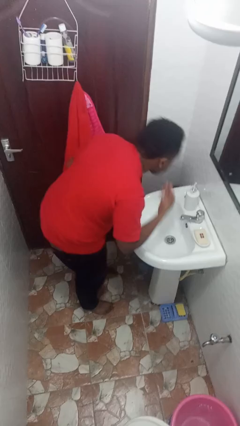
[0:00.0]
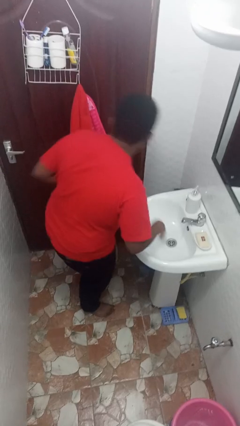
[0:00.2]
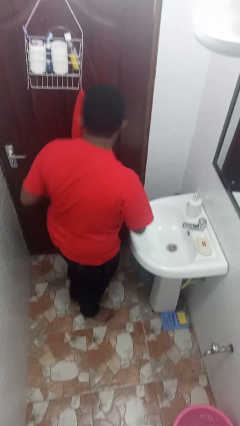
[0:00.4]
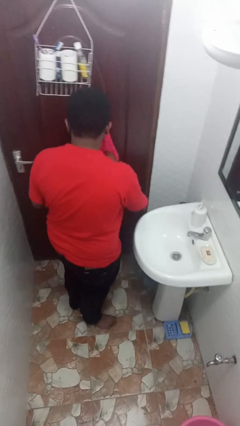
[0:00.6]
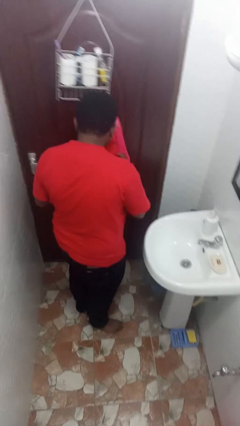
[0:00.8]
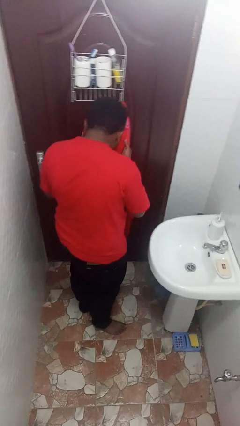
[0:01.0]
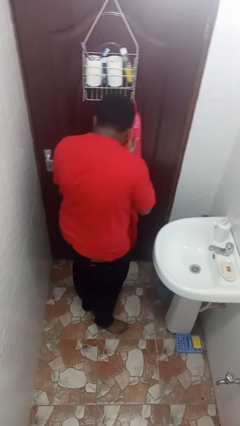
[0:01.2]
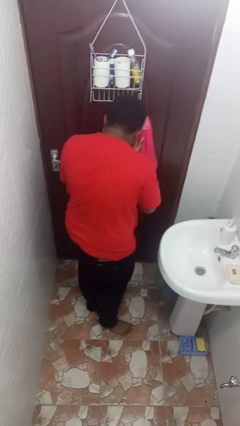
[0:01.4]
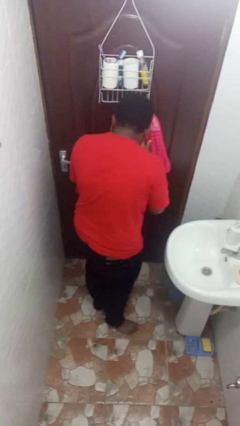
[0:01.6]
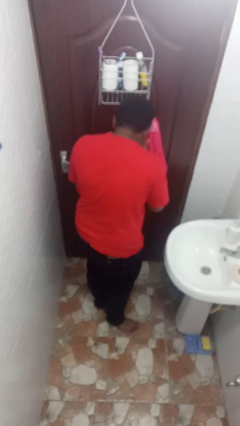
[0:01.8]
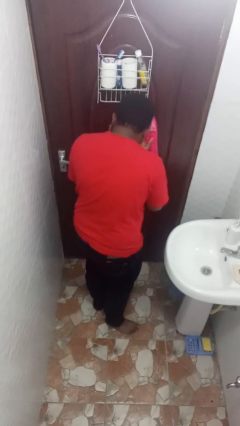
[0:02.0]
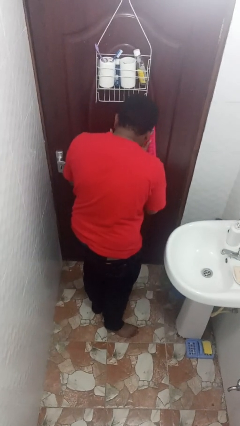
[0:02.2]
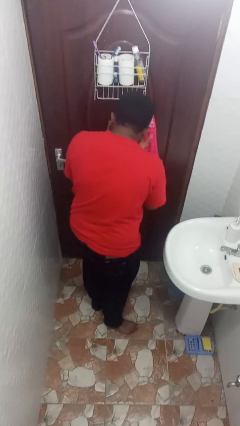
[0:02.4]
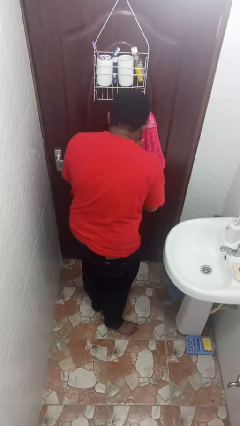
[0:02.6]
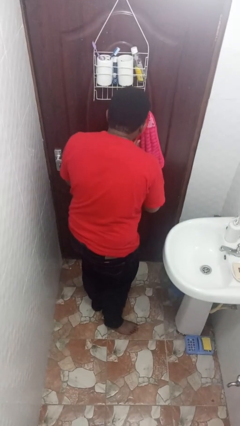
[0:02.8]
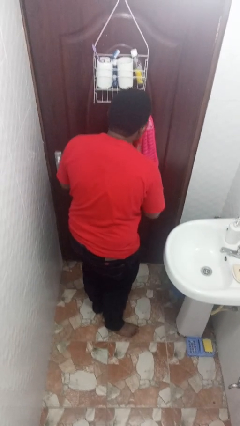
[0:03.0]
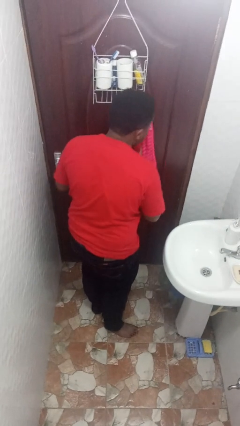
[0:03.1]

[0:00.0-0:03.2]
person dries face with towel

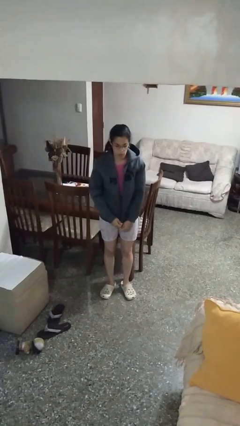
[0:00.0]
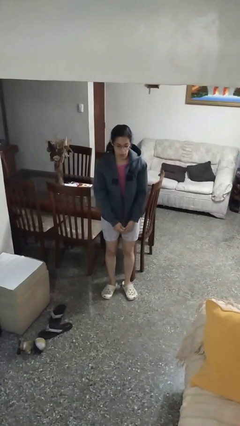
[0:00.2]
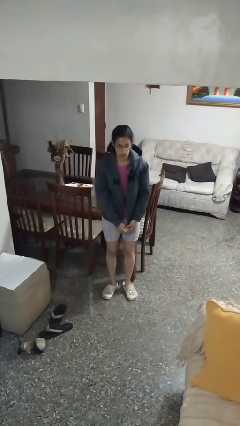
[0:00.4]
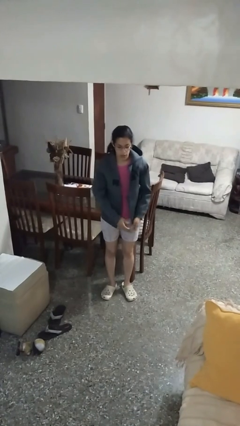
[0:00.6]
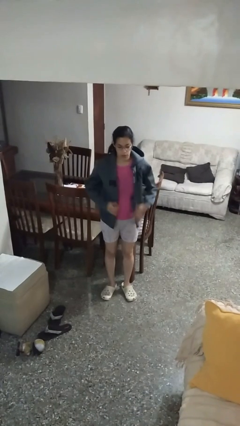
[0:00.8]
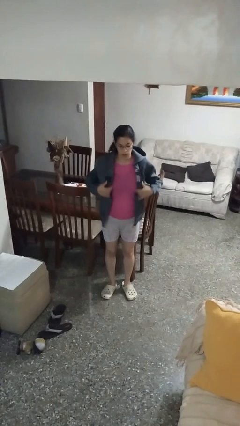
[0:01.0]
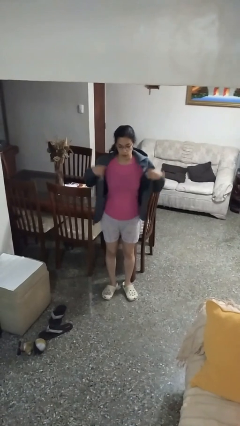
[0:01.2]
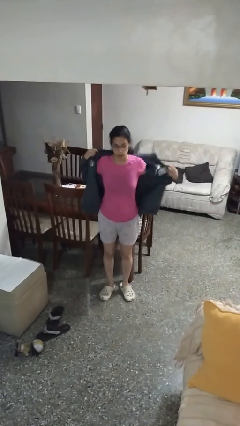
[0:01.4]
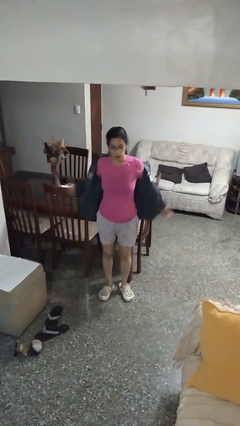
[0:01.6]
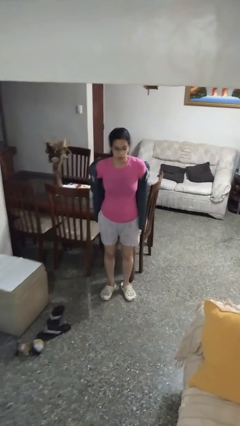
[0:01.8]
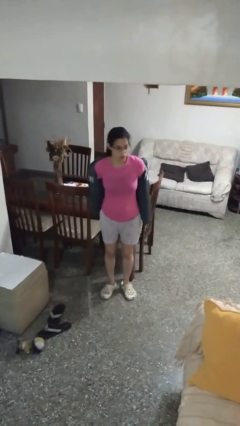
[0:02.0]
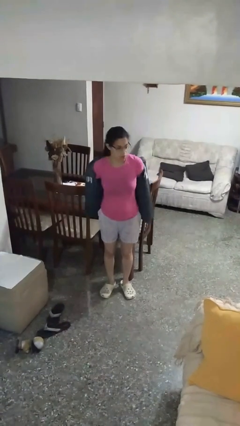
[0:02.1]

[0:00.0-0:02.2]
person unzips jacket

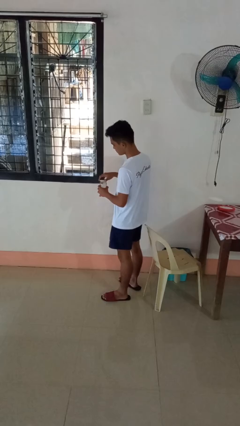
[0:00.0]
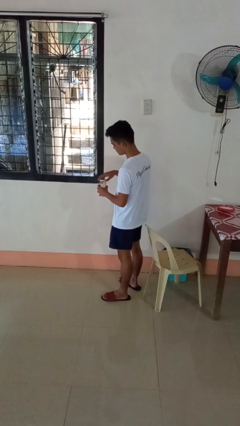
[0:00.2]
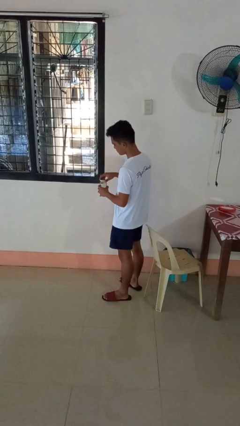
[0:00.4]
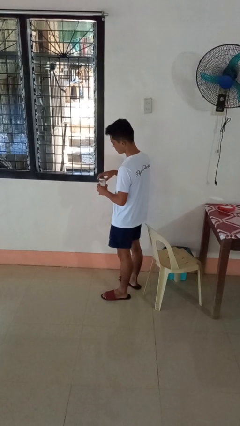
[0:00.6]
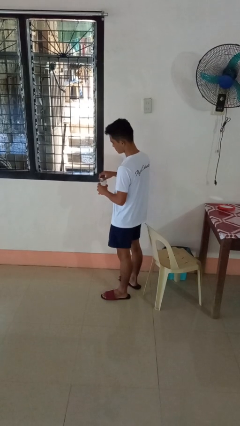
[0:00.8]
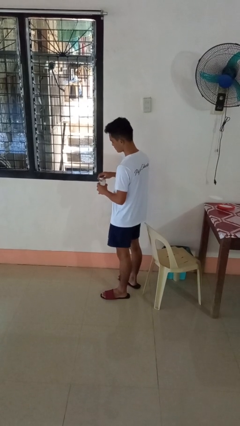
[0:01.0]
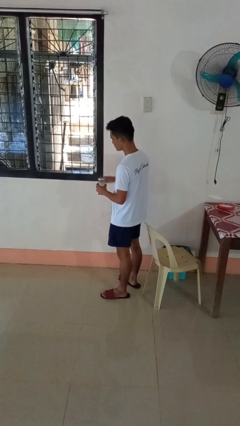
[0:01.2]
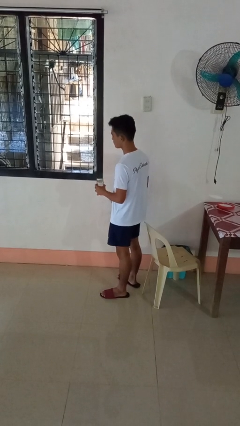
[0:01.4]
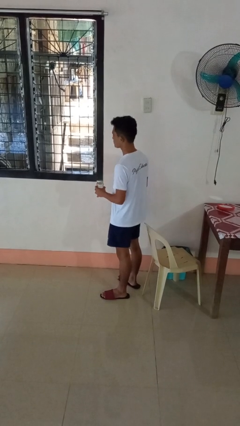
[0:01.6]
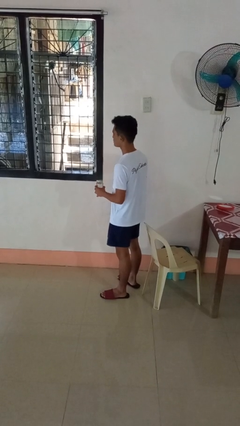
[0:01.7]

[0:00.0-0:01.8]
person closes jar

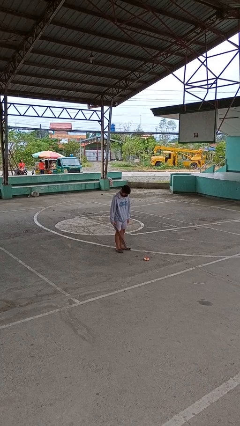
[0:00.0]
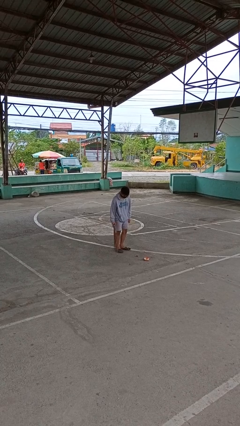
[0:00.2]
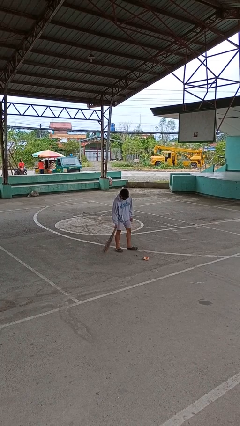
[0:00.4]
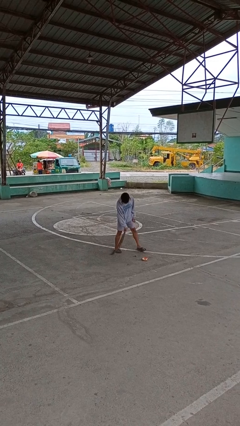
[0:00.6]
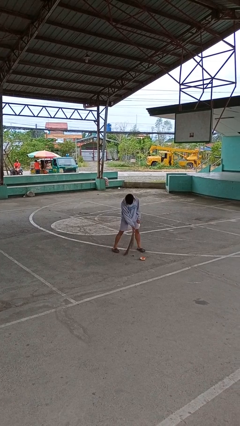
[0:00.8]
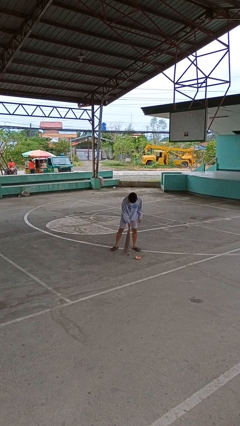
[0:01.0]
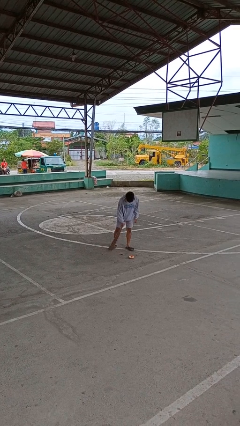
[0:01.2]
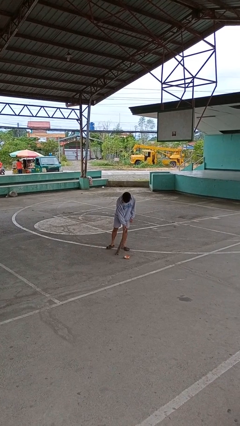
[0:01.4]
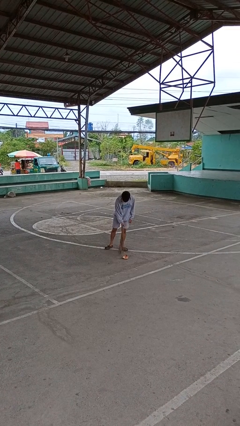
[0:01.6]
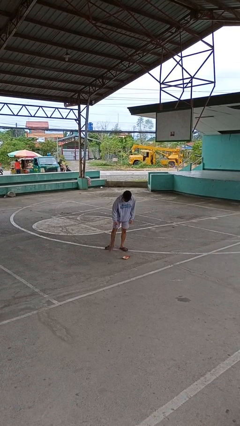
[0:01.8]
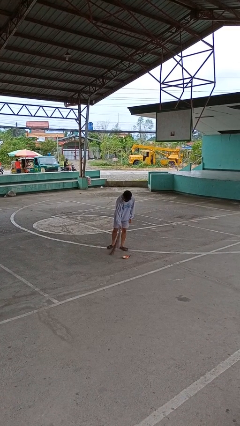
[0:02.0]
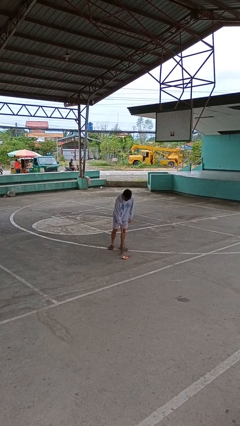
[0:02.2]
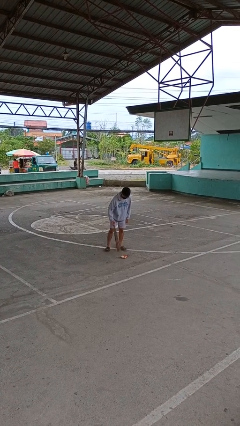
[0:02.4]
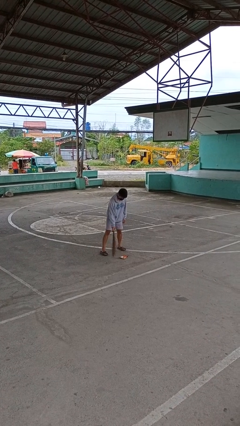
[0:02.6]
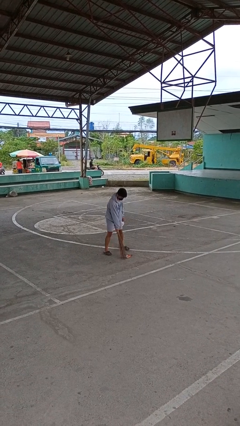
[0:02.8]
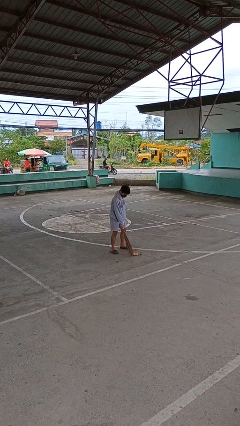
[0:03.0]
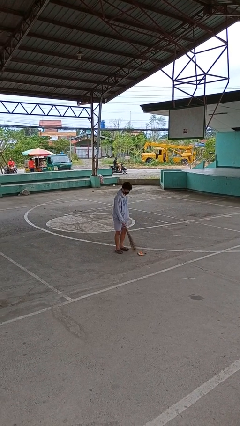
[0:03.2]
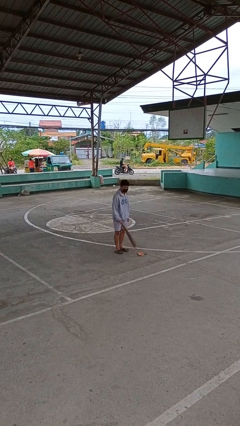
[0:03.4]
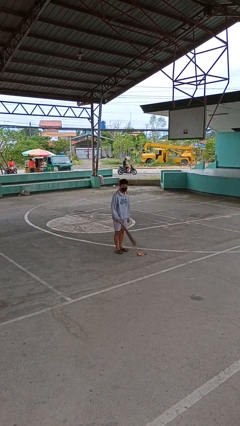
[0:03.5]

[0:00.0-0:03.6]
person sweeps floor

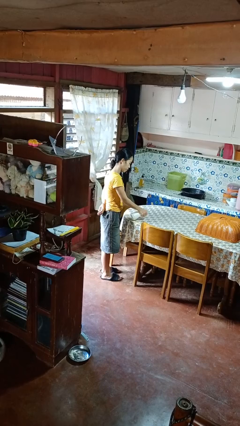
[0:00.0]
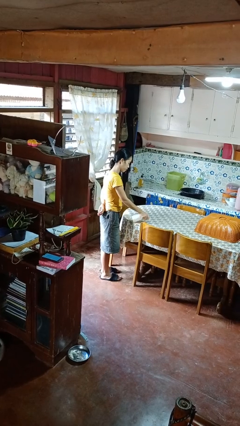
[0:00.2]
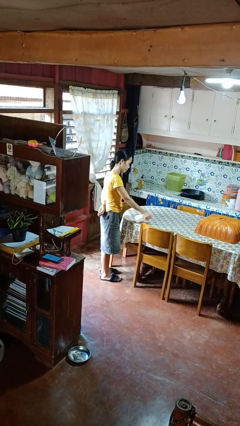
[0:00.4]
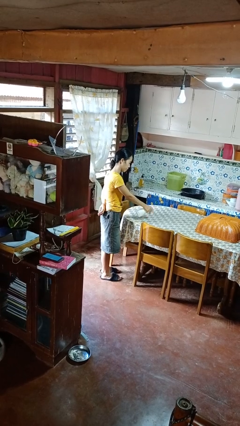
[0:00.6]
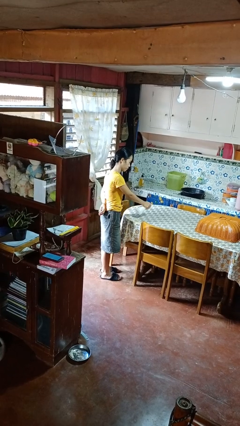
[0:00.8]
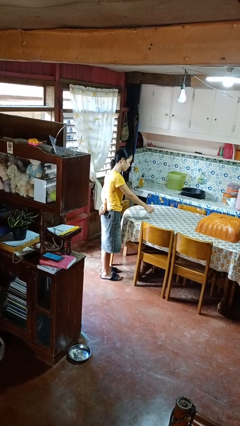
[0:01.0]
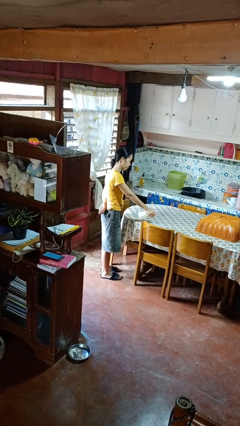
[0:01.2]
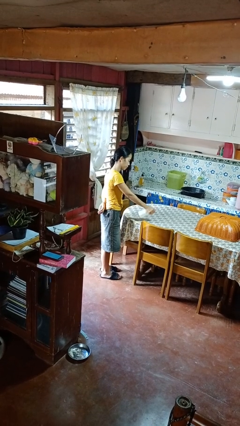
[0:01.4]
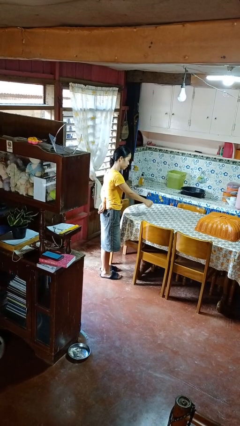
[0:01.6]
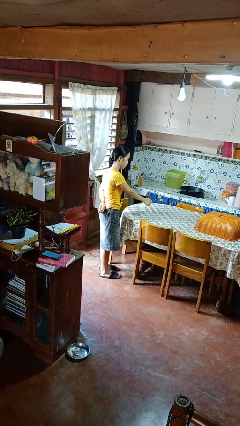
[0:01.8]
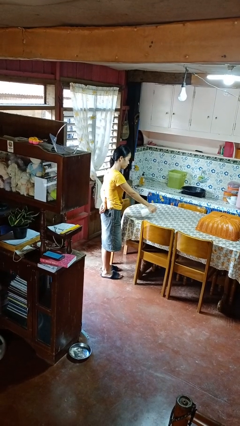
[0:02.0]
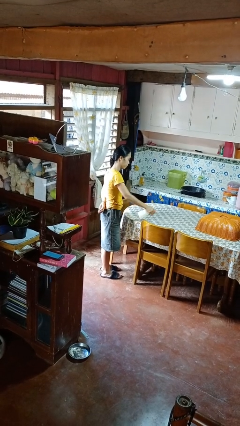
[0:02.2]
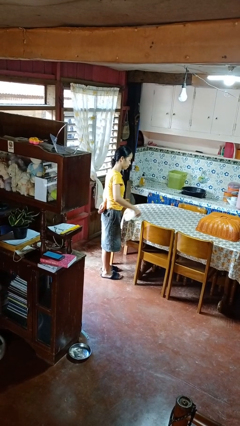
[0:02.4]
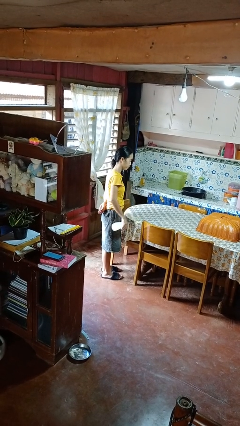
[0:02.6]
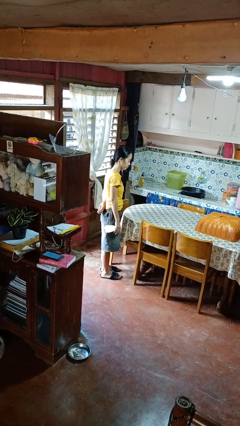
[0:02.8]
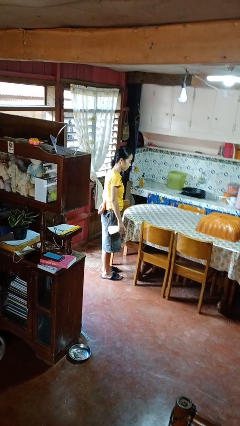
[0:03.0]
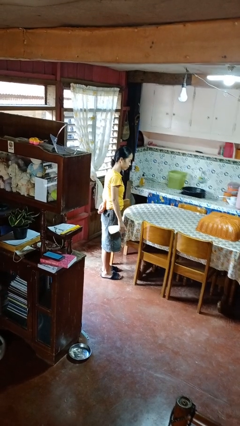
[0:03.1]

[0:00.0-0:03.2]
person sprays from bottle

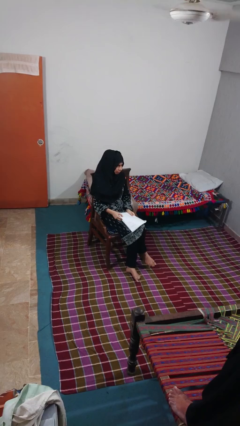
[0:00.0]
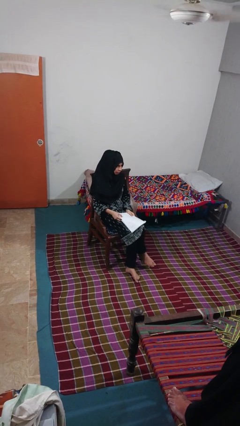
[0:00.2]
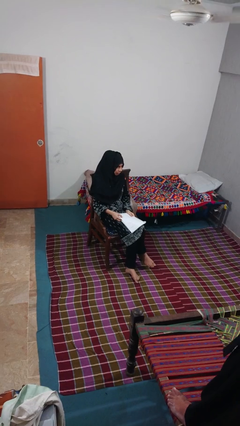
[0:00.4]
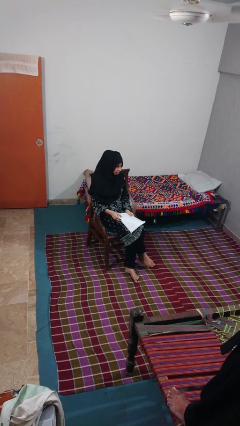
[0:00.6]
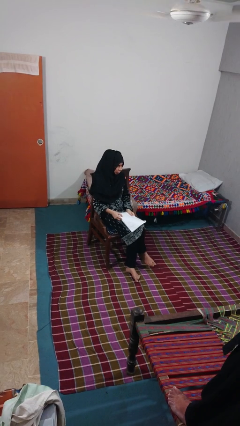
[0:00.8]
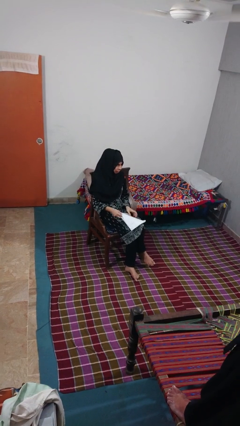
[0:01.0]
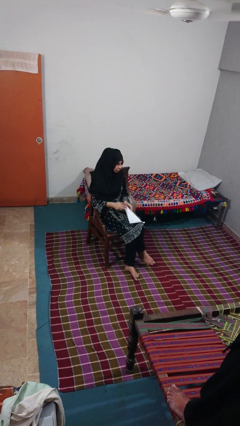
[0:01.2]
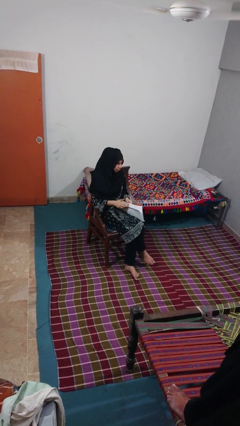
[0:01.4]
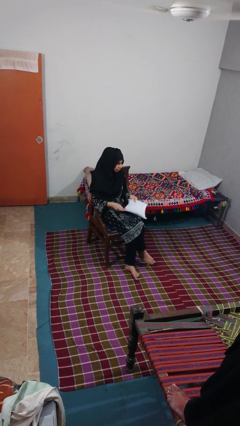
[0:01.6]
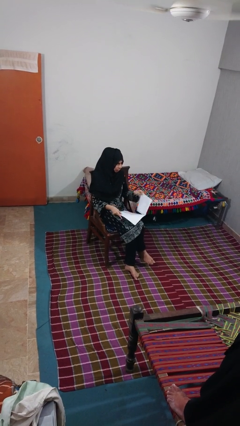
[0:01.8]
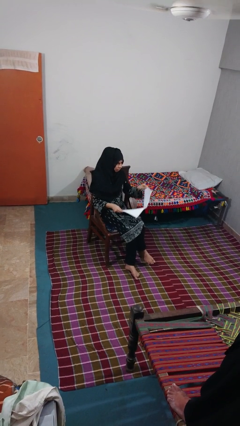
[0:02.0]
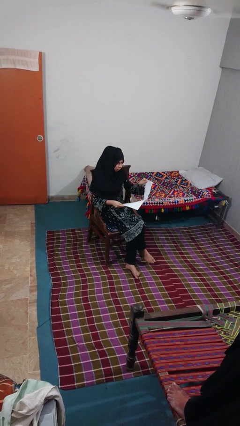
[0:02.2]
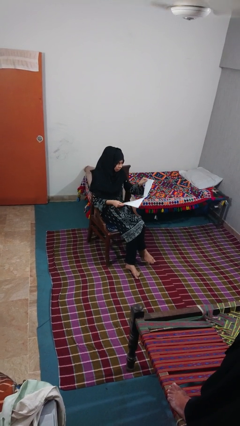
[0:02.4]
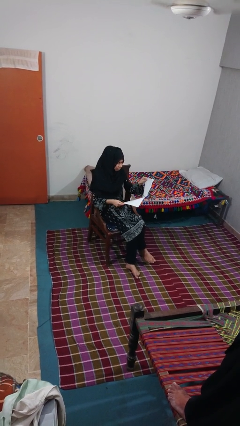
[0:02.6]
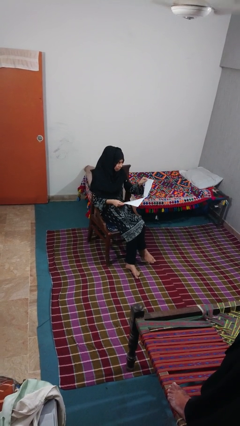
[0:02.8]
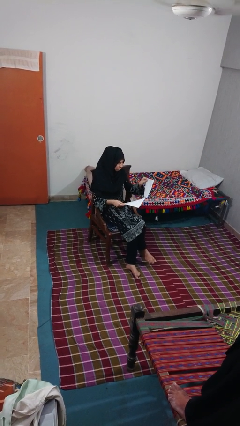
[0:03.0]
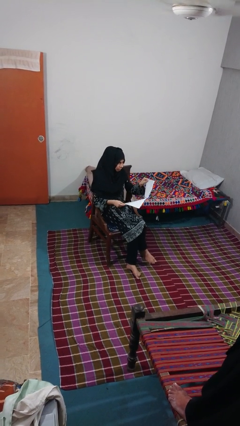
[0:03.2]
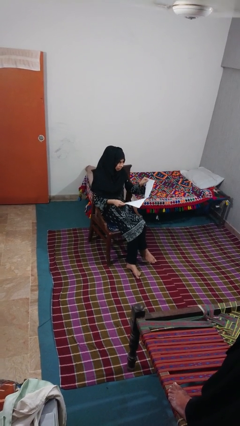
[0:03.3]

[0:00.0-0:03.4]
person reads newspaper
